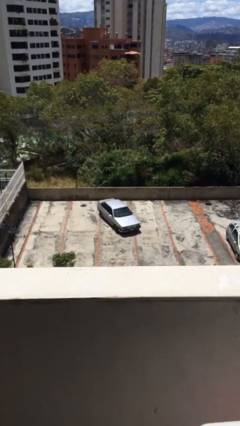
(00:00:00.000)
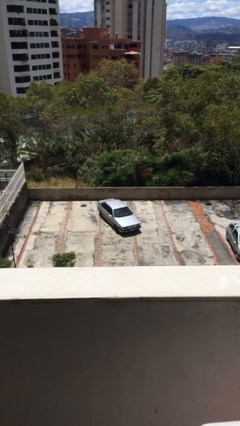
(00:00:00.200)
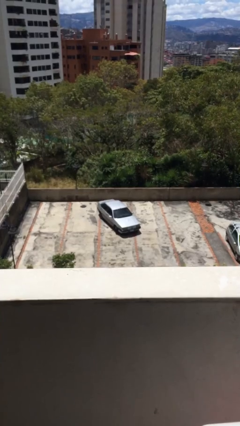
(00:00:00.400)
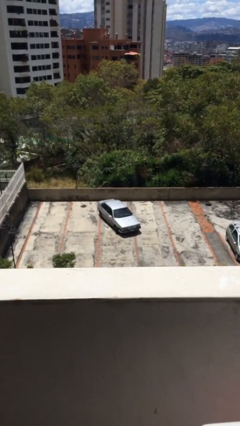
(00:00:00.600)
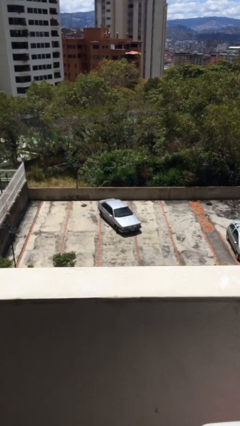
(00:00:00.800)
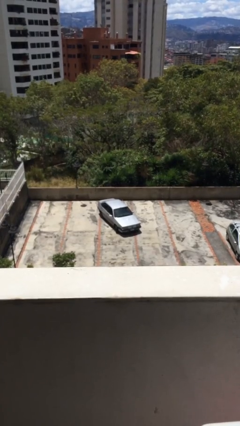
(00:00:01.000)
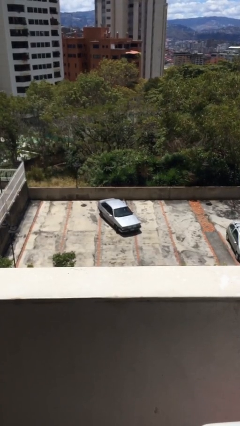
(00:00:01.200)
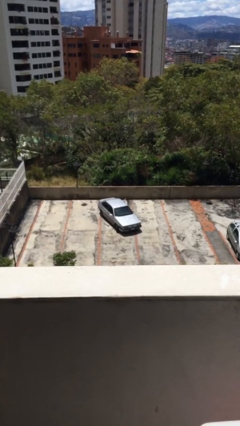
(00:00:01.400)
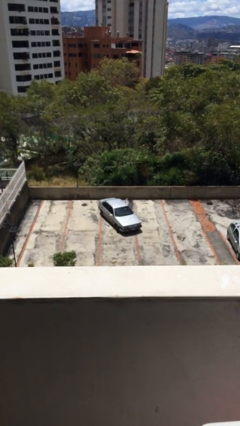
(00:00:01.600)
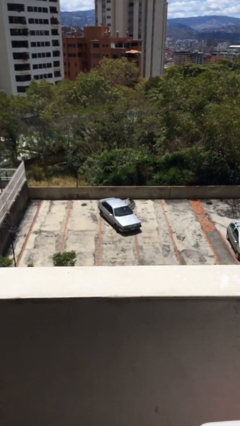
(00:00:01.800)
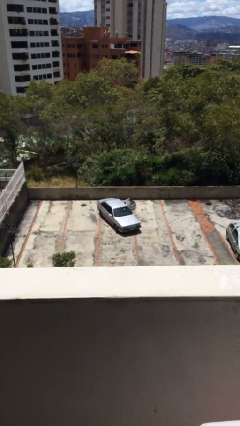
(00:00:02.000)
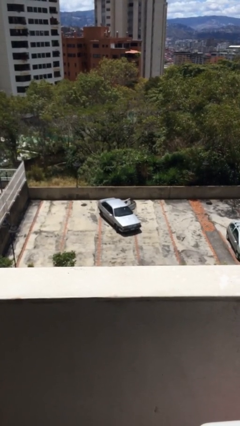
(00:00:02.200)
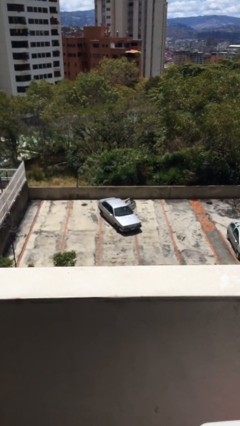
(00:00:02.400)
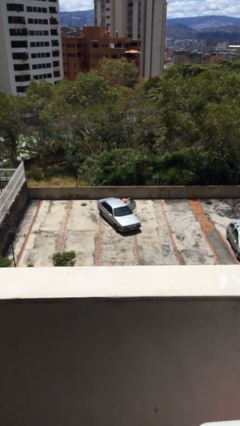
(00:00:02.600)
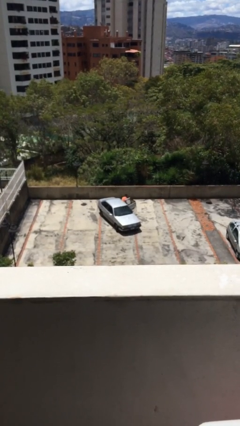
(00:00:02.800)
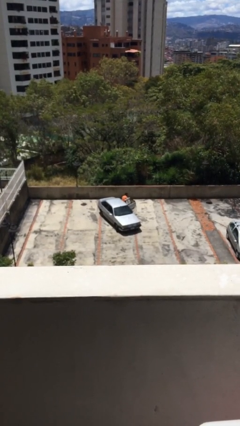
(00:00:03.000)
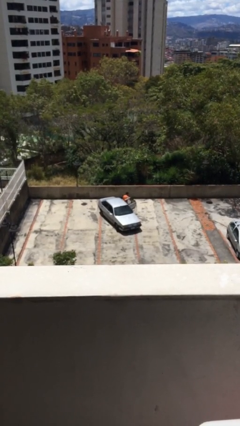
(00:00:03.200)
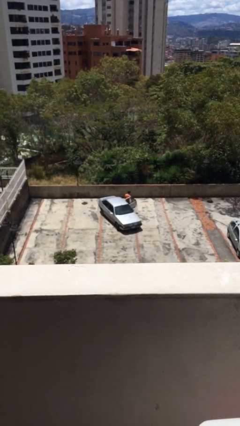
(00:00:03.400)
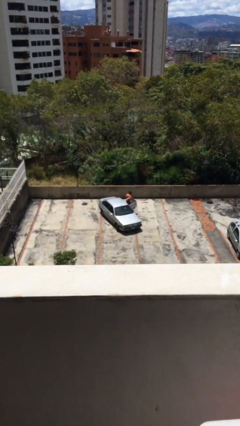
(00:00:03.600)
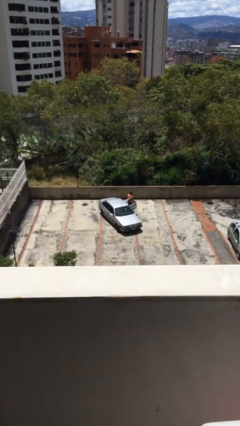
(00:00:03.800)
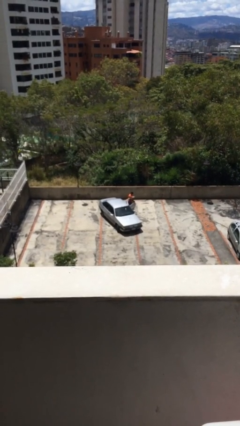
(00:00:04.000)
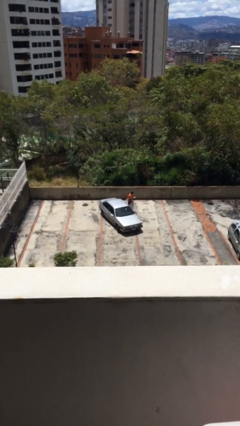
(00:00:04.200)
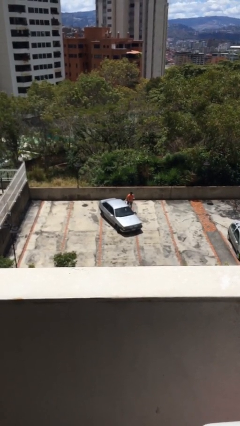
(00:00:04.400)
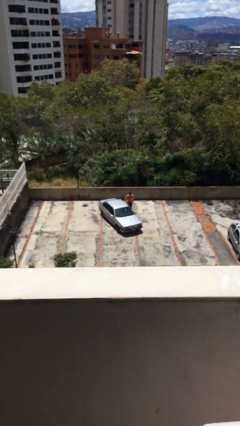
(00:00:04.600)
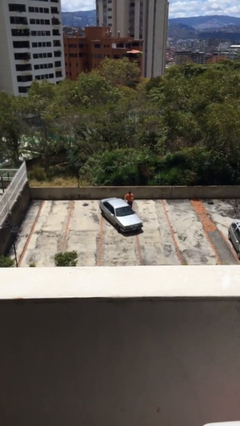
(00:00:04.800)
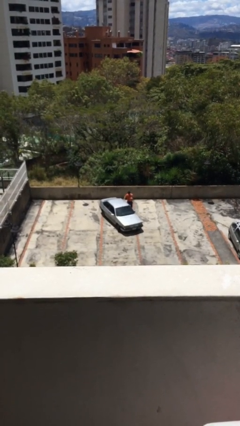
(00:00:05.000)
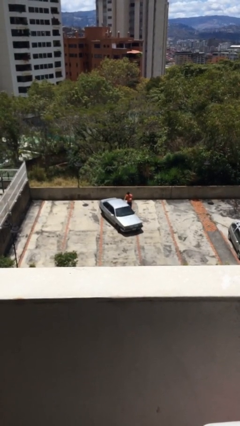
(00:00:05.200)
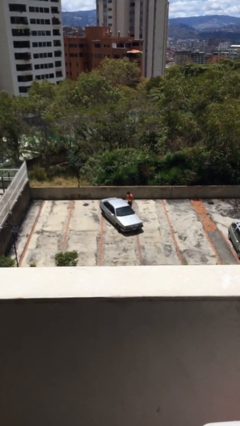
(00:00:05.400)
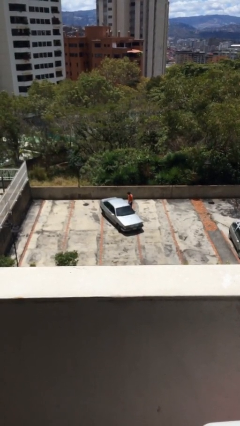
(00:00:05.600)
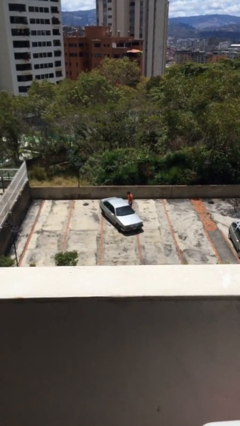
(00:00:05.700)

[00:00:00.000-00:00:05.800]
car drops off person

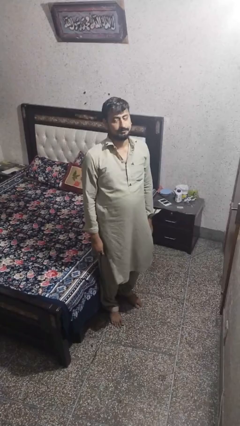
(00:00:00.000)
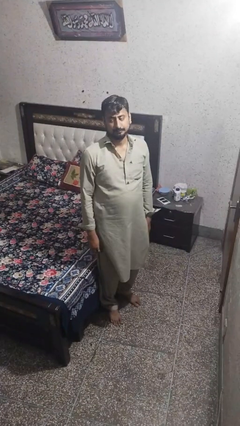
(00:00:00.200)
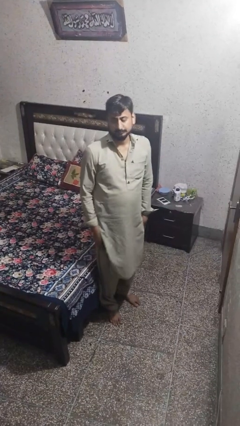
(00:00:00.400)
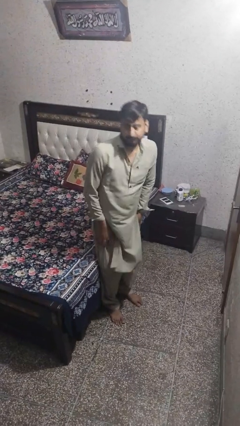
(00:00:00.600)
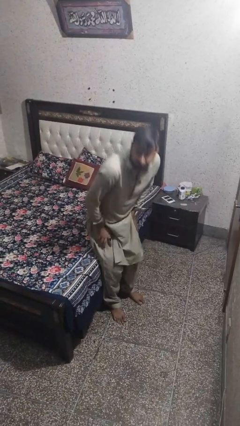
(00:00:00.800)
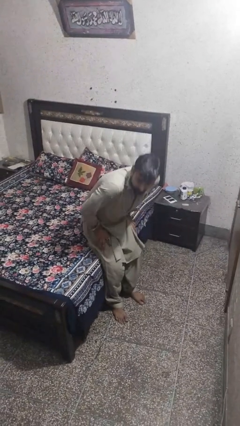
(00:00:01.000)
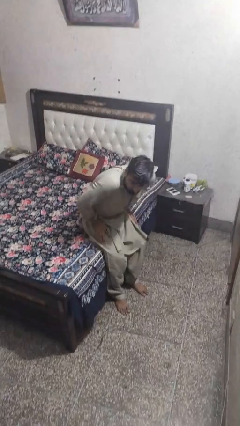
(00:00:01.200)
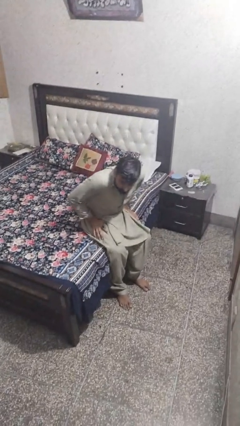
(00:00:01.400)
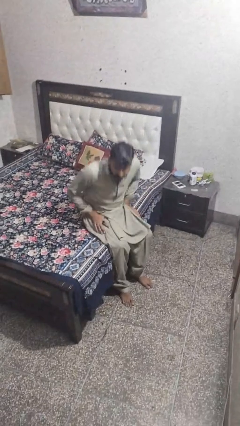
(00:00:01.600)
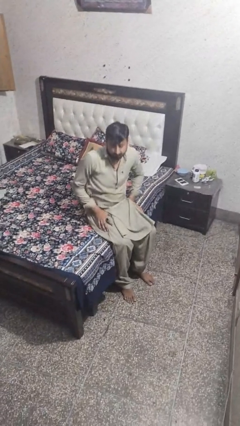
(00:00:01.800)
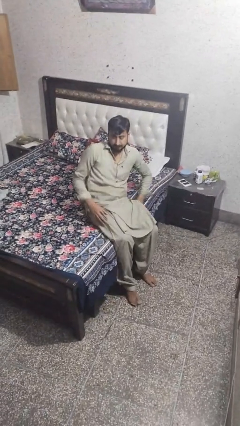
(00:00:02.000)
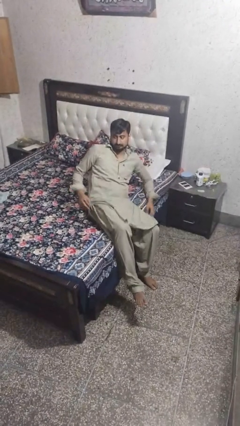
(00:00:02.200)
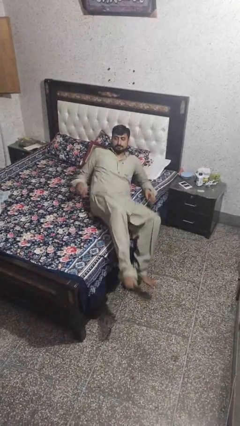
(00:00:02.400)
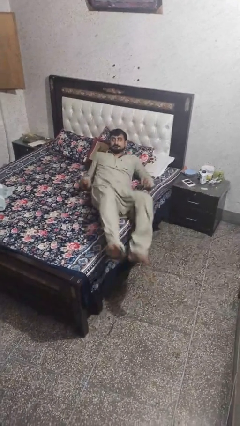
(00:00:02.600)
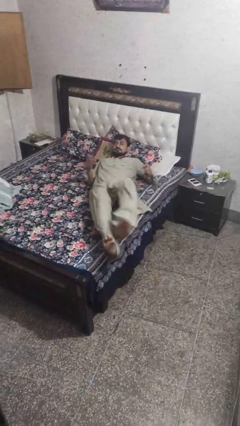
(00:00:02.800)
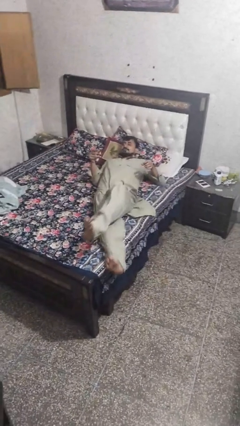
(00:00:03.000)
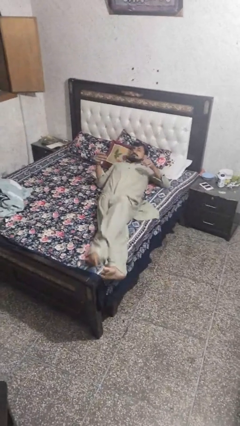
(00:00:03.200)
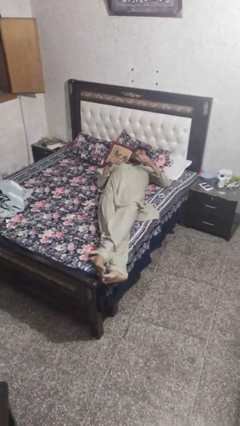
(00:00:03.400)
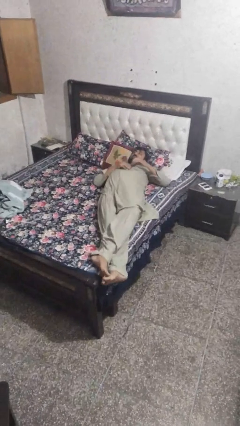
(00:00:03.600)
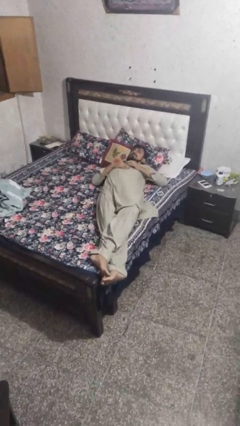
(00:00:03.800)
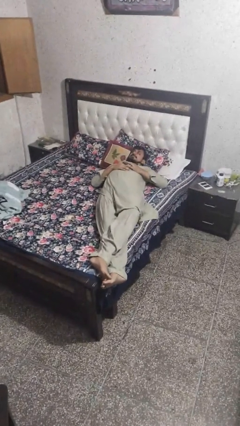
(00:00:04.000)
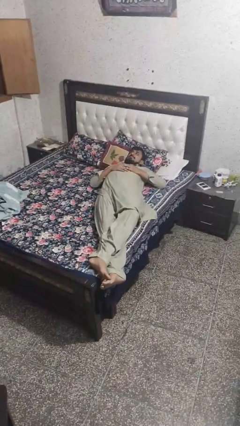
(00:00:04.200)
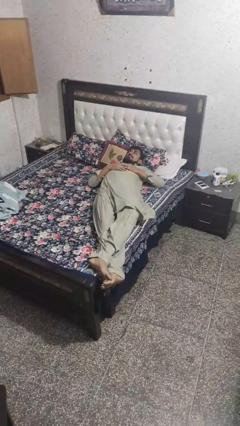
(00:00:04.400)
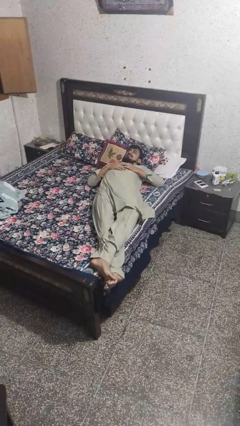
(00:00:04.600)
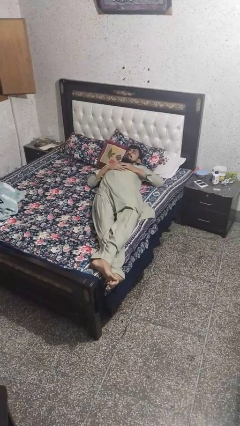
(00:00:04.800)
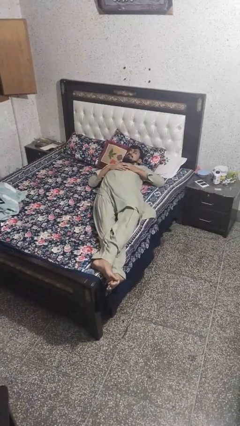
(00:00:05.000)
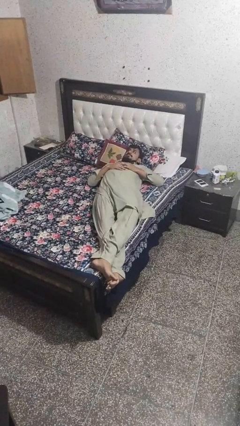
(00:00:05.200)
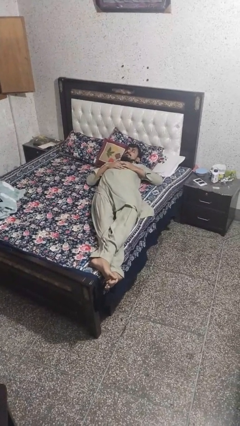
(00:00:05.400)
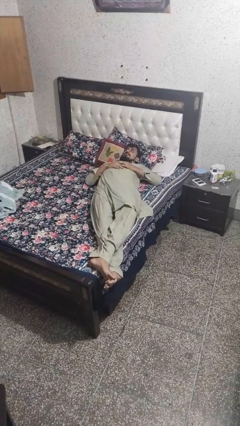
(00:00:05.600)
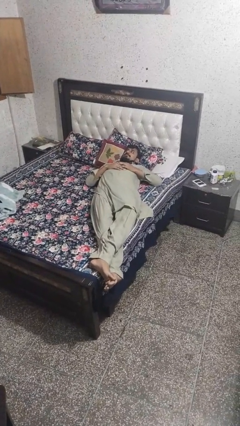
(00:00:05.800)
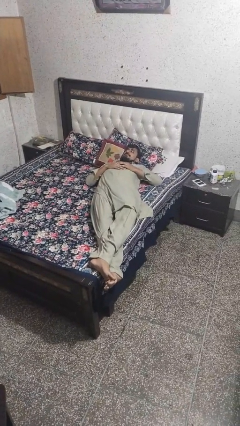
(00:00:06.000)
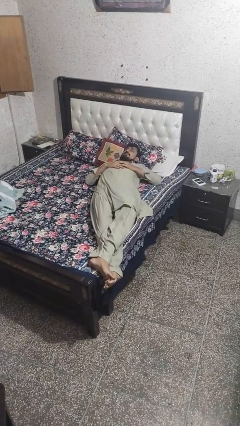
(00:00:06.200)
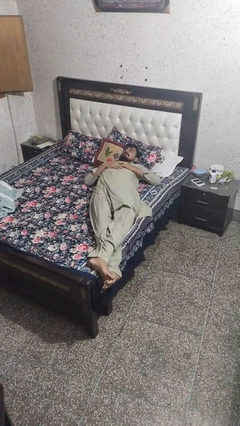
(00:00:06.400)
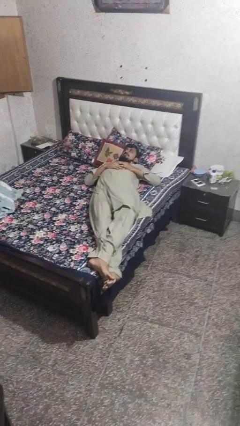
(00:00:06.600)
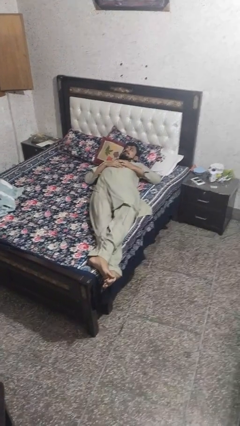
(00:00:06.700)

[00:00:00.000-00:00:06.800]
person lies down on bed

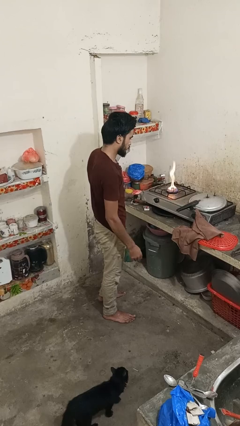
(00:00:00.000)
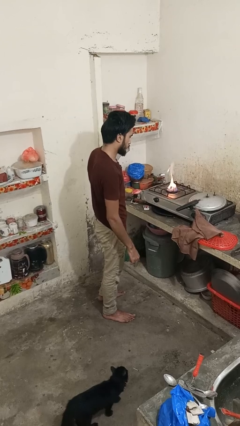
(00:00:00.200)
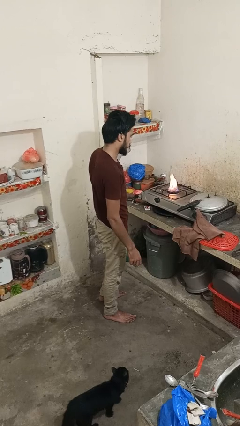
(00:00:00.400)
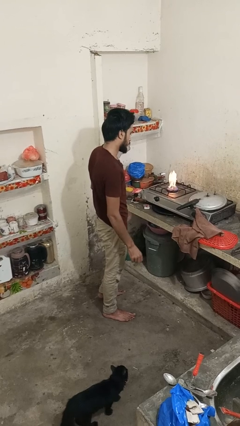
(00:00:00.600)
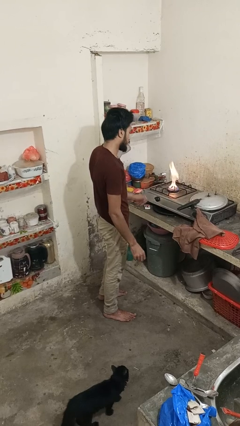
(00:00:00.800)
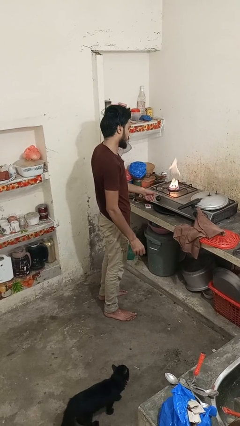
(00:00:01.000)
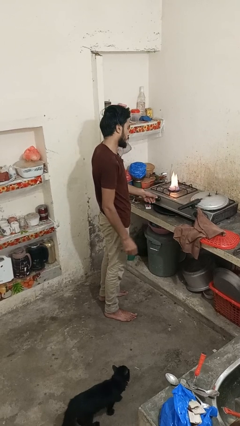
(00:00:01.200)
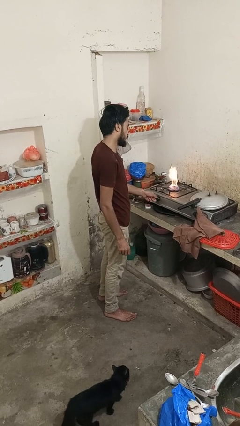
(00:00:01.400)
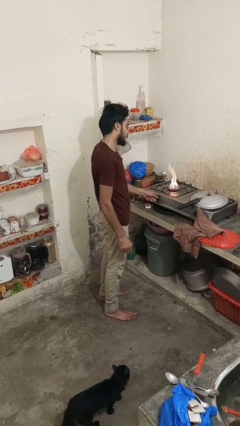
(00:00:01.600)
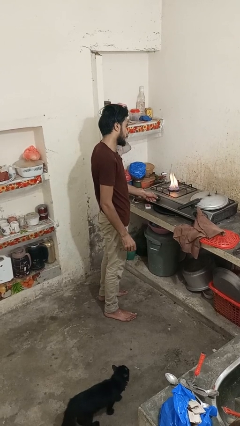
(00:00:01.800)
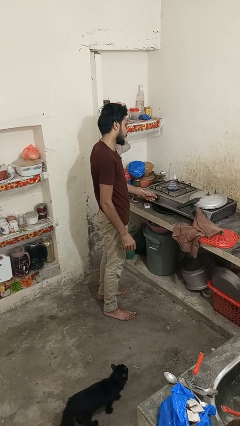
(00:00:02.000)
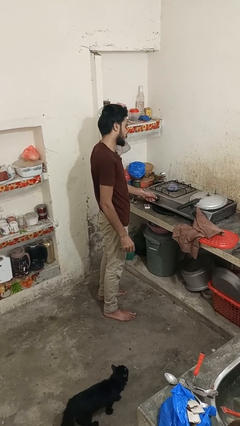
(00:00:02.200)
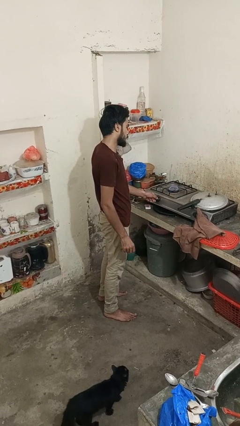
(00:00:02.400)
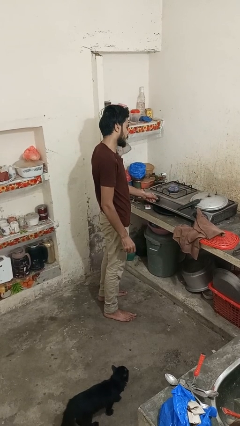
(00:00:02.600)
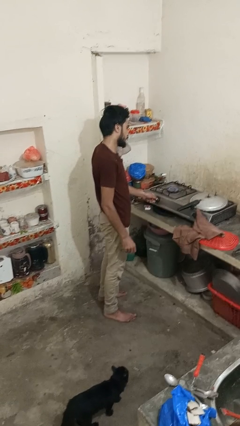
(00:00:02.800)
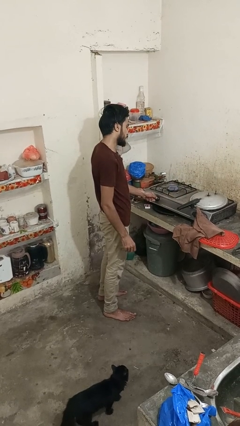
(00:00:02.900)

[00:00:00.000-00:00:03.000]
person turns off stovetop

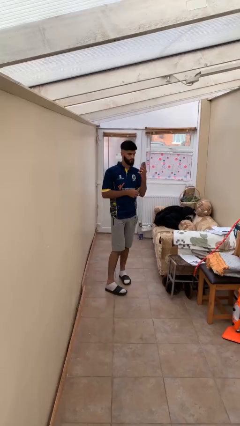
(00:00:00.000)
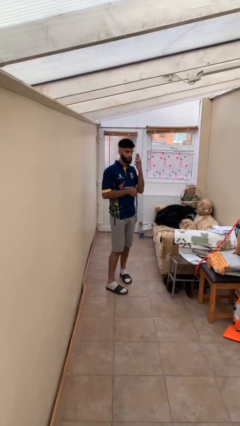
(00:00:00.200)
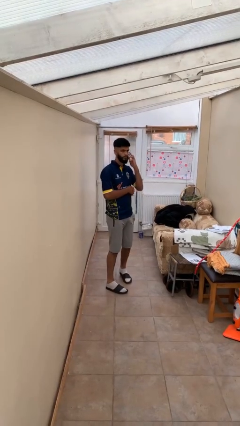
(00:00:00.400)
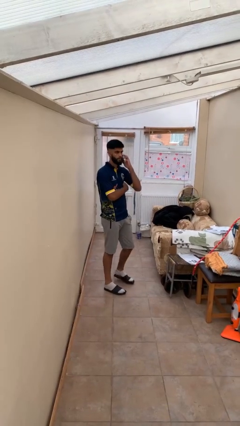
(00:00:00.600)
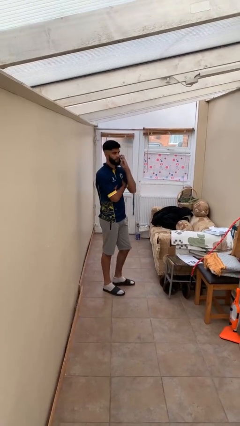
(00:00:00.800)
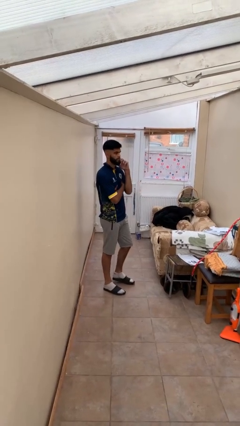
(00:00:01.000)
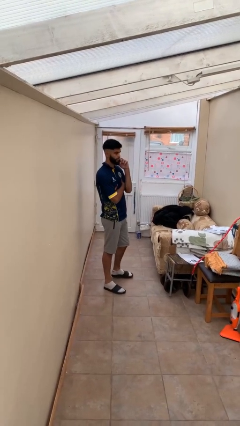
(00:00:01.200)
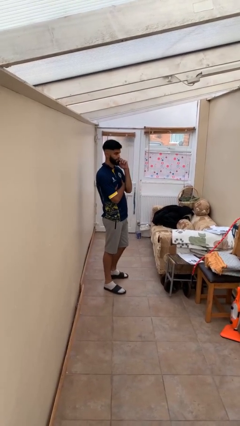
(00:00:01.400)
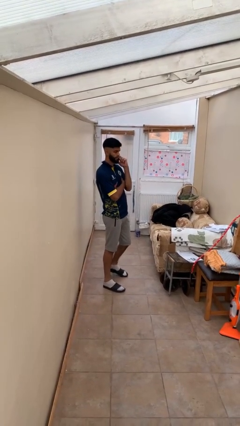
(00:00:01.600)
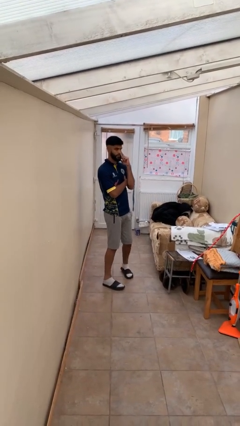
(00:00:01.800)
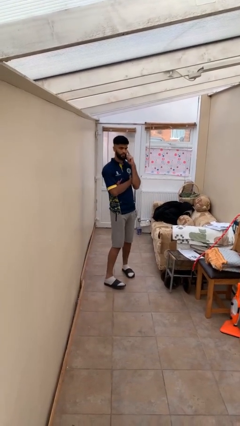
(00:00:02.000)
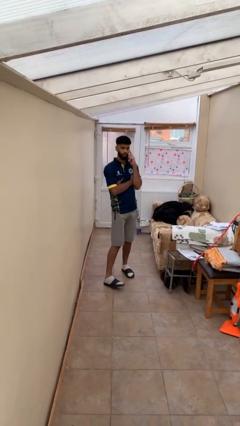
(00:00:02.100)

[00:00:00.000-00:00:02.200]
person talks on phone
